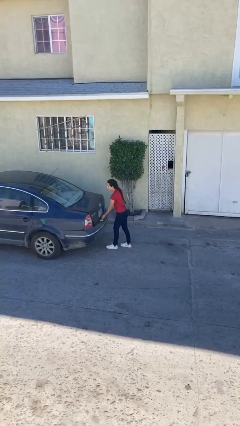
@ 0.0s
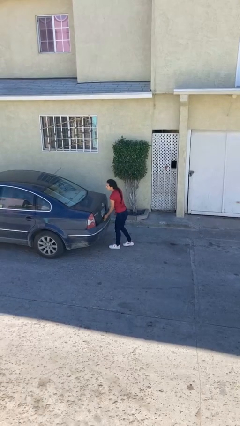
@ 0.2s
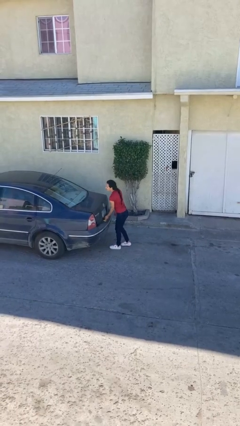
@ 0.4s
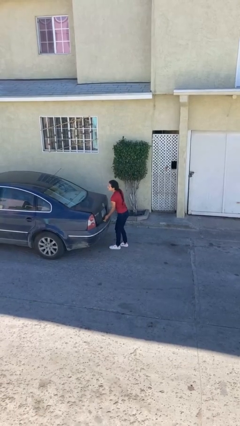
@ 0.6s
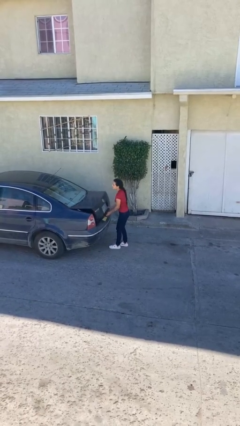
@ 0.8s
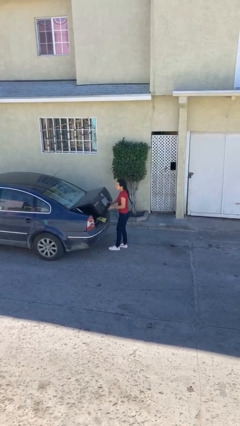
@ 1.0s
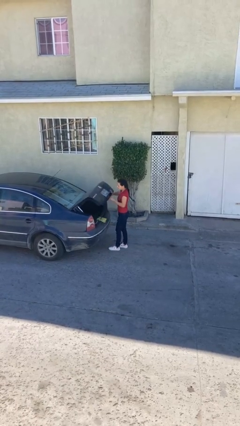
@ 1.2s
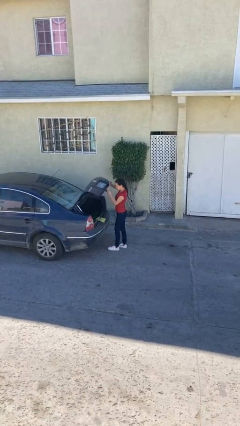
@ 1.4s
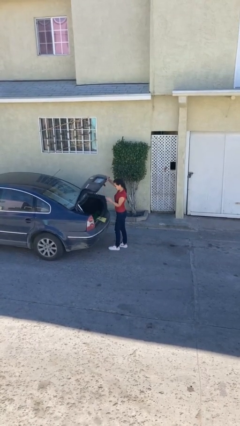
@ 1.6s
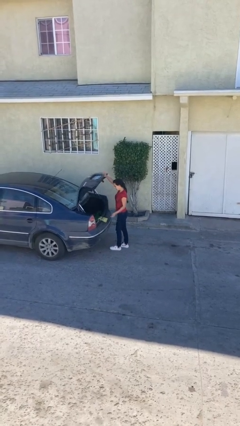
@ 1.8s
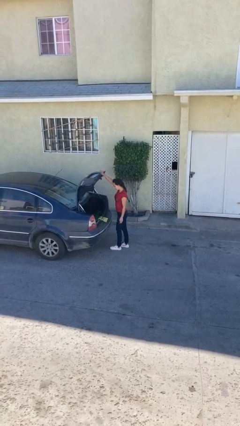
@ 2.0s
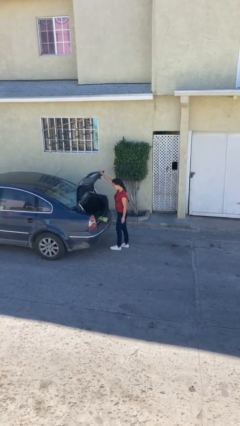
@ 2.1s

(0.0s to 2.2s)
person opens car trunk

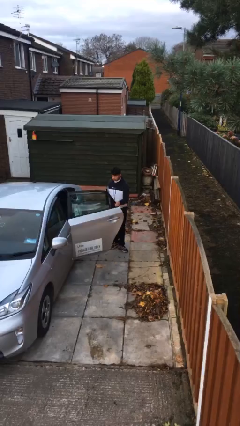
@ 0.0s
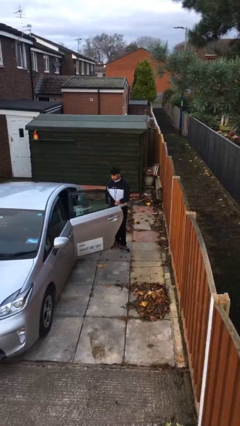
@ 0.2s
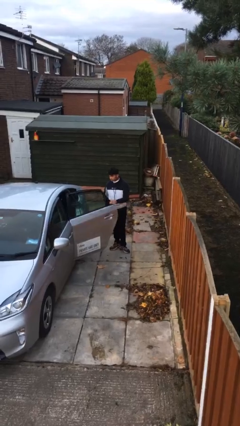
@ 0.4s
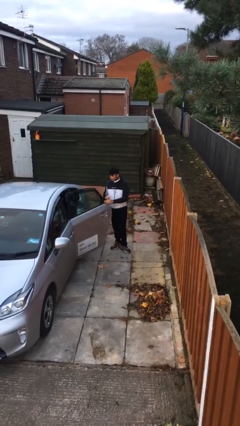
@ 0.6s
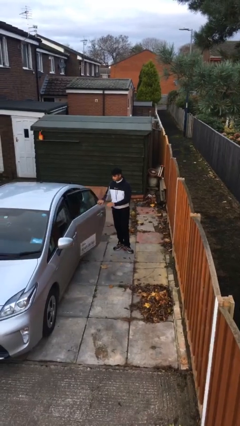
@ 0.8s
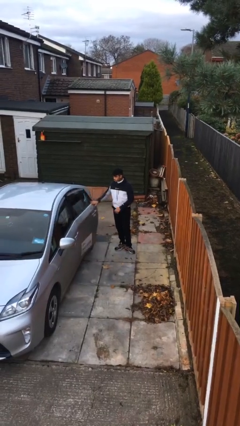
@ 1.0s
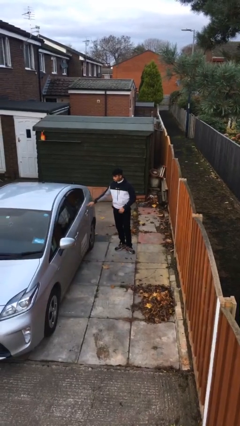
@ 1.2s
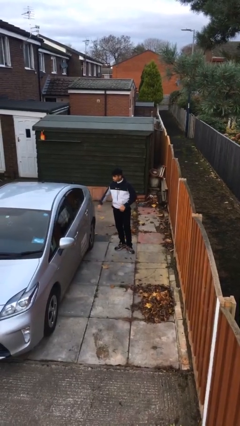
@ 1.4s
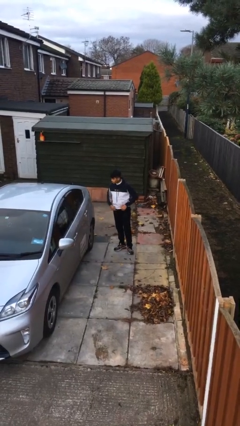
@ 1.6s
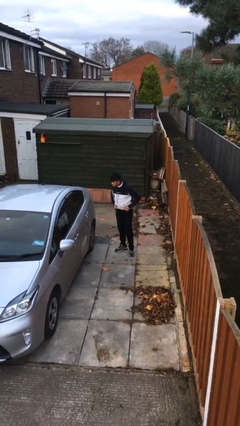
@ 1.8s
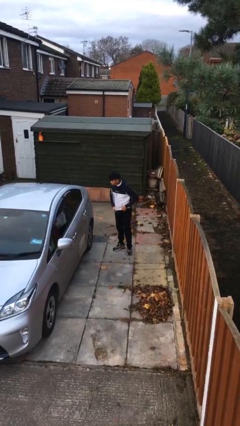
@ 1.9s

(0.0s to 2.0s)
person closes car door

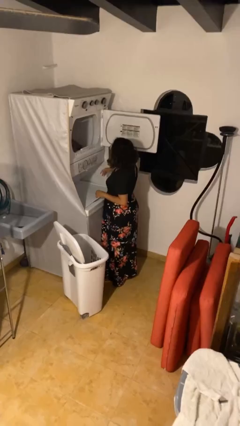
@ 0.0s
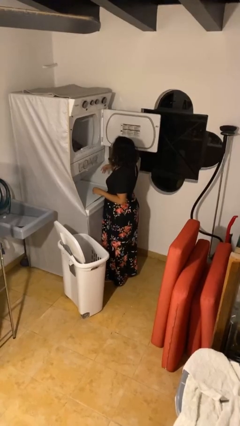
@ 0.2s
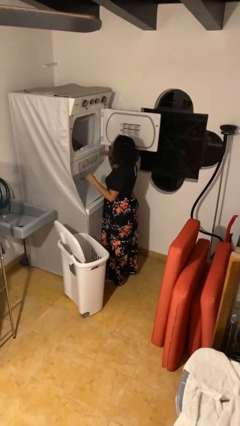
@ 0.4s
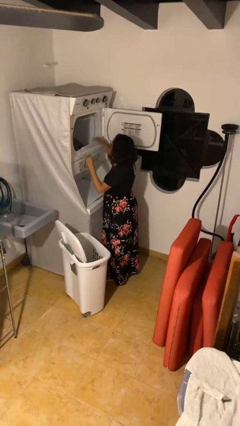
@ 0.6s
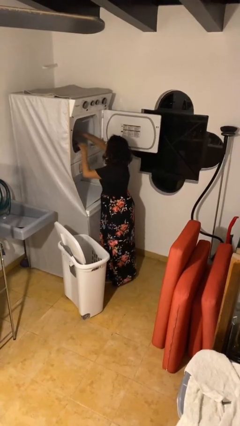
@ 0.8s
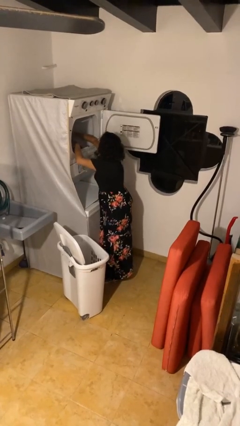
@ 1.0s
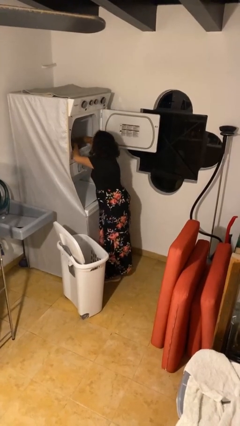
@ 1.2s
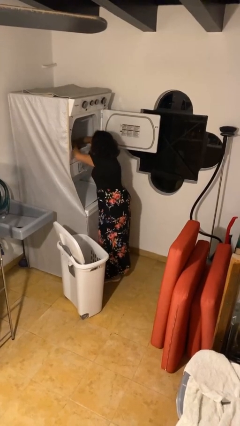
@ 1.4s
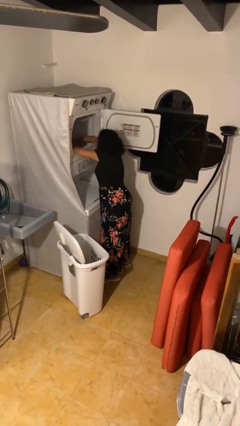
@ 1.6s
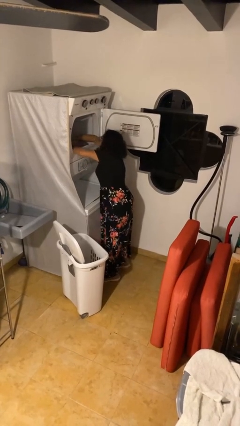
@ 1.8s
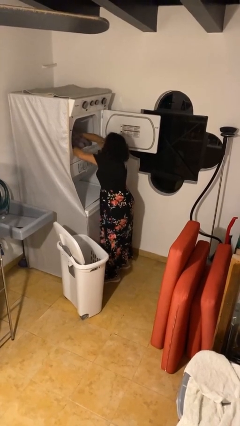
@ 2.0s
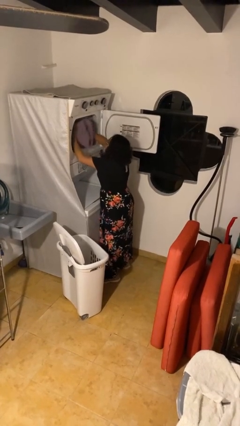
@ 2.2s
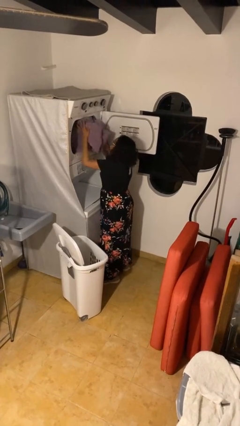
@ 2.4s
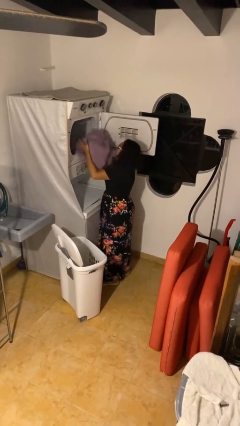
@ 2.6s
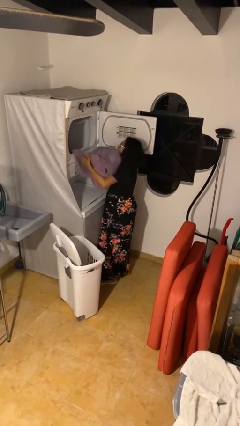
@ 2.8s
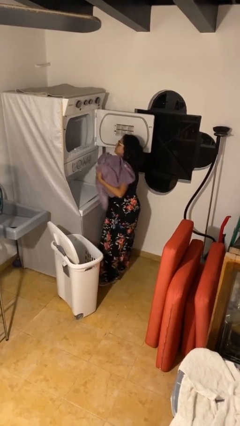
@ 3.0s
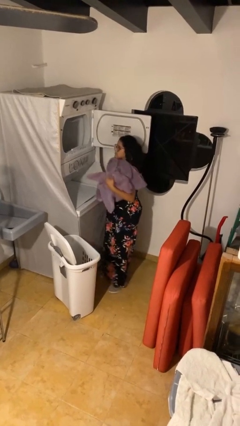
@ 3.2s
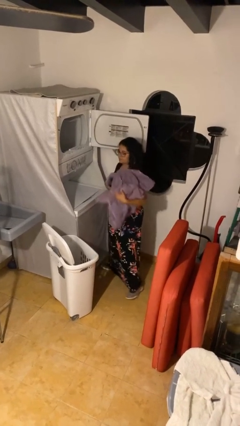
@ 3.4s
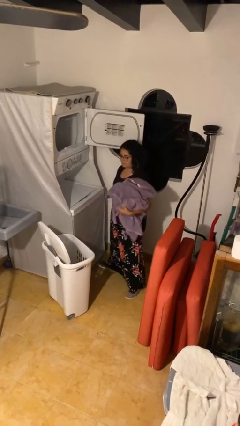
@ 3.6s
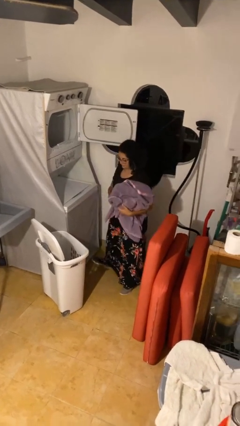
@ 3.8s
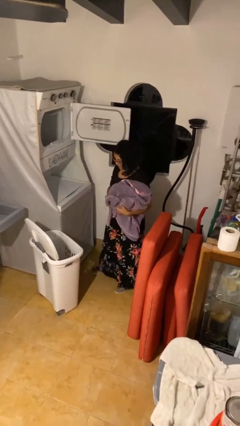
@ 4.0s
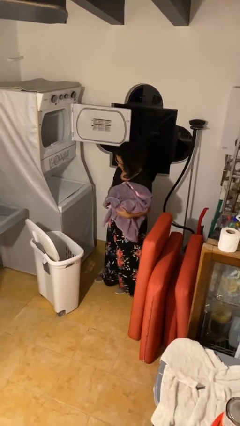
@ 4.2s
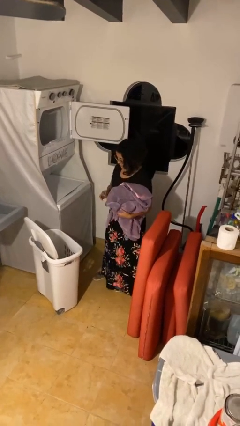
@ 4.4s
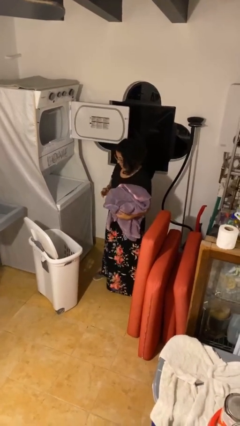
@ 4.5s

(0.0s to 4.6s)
person unloads dryer

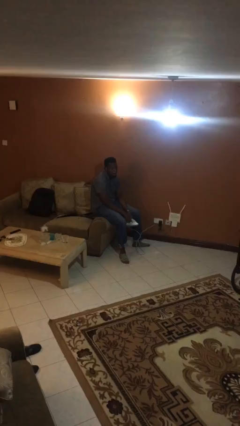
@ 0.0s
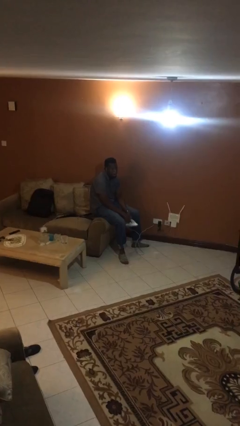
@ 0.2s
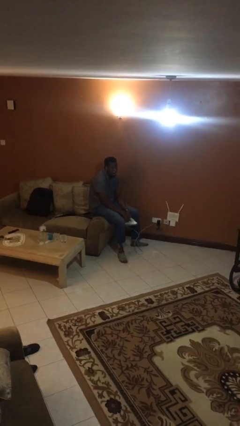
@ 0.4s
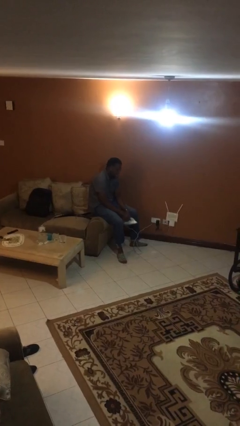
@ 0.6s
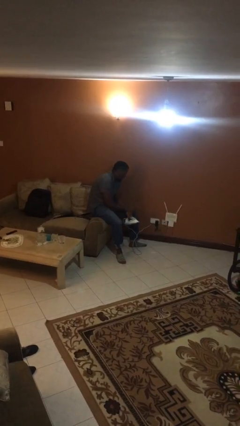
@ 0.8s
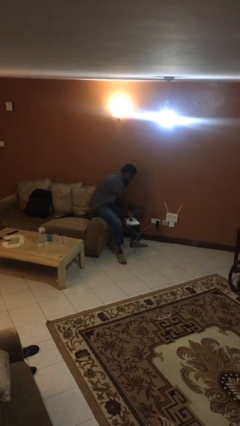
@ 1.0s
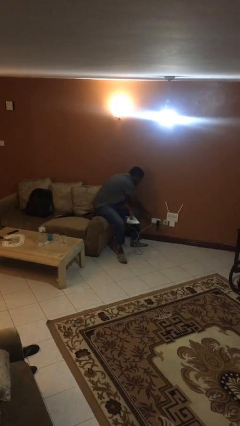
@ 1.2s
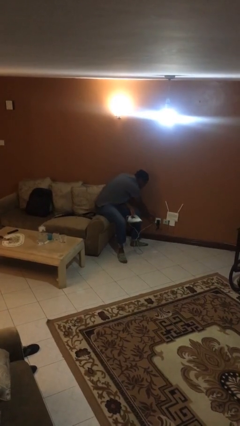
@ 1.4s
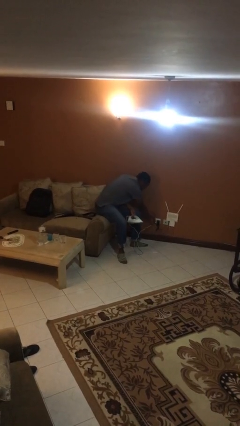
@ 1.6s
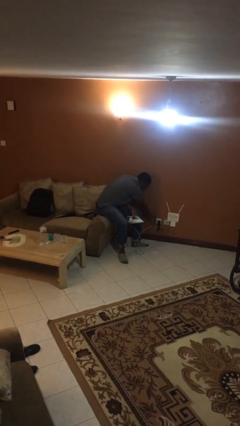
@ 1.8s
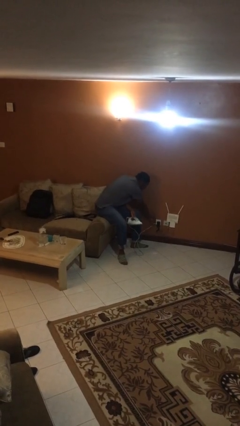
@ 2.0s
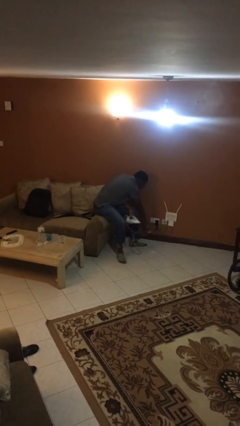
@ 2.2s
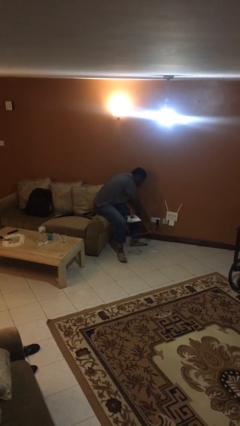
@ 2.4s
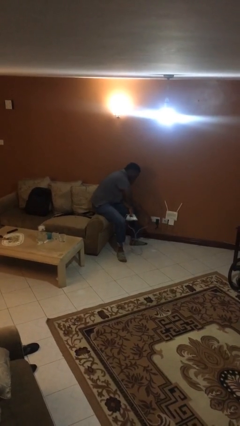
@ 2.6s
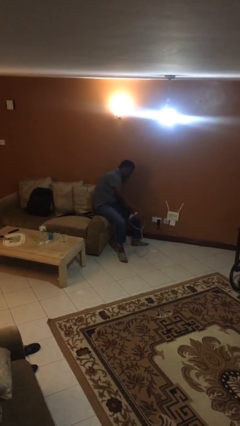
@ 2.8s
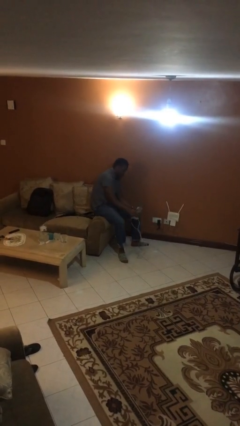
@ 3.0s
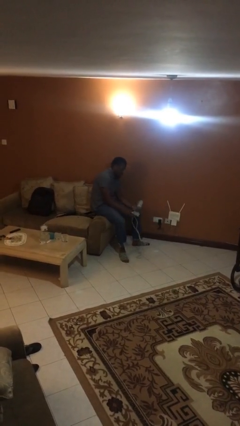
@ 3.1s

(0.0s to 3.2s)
person unplugs from electrical socket

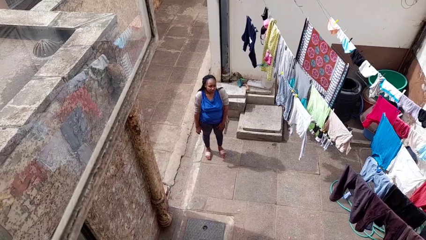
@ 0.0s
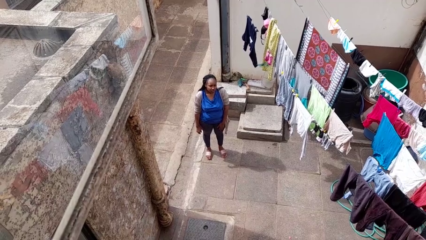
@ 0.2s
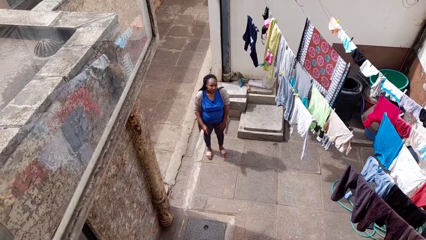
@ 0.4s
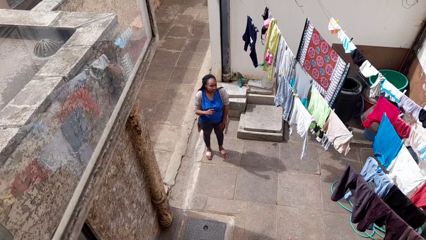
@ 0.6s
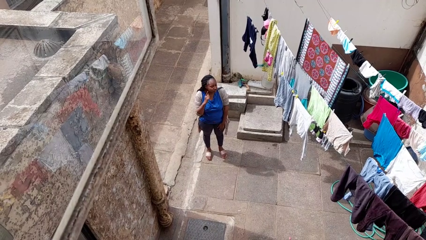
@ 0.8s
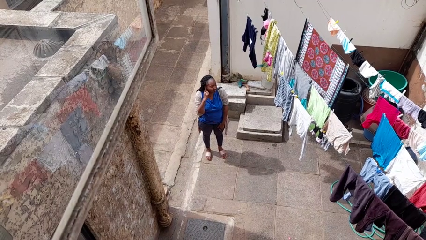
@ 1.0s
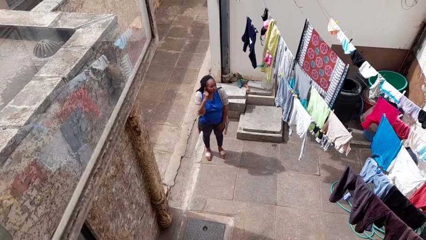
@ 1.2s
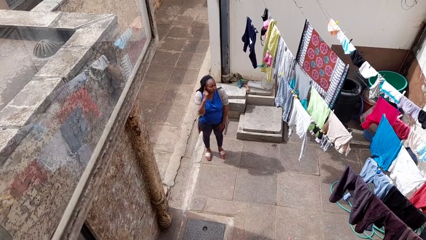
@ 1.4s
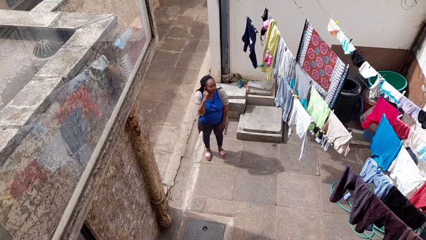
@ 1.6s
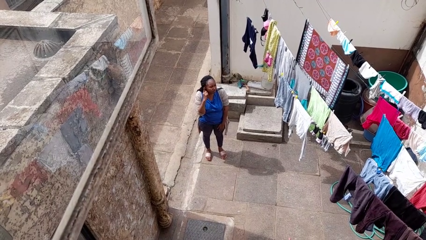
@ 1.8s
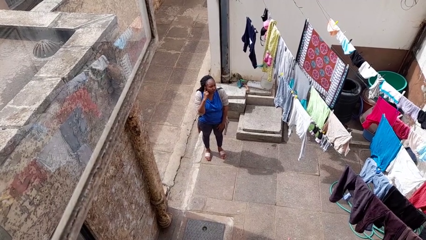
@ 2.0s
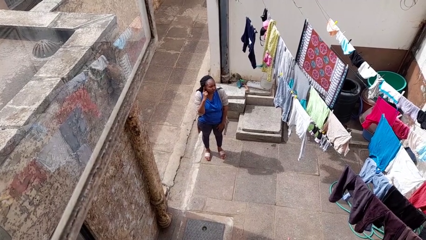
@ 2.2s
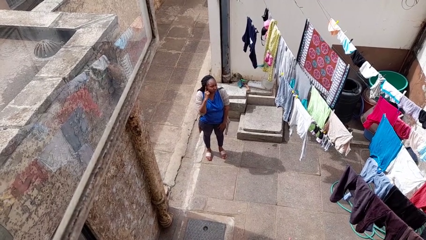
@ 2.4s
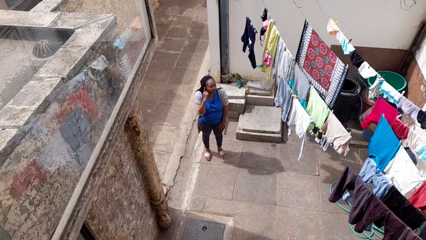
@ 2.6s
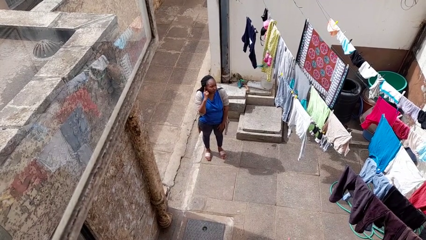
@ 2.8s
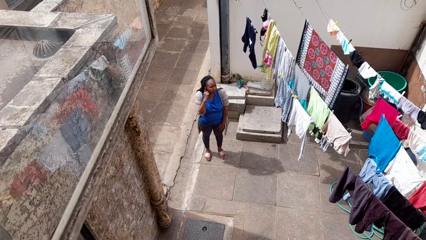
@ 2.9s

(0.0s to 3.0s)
person gestures listen closely

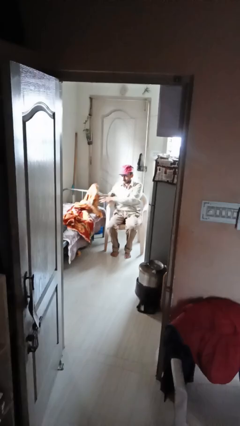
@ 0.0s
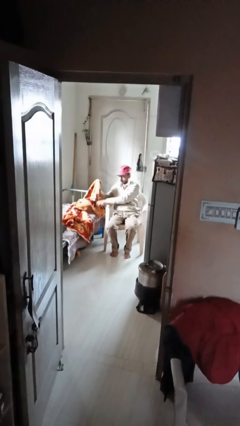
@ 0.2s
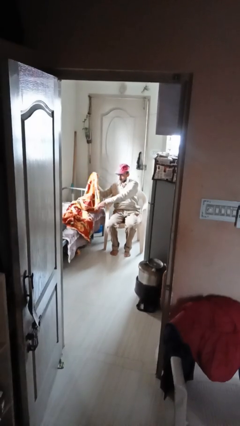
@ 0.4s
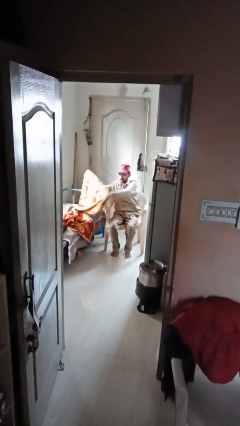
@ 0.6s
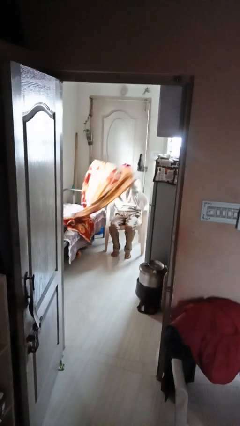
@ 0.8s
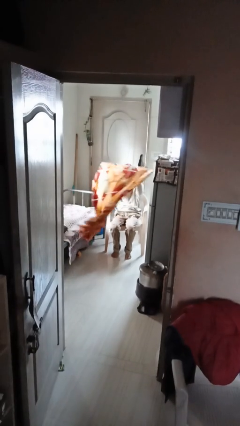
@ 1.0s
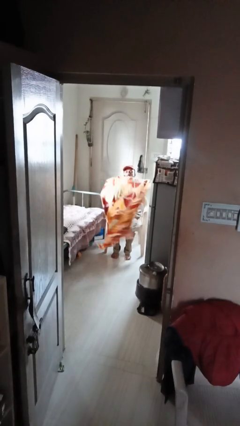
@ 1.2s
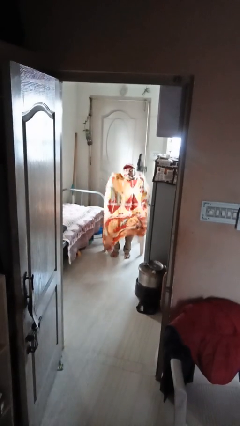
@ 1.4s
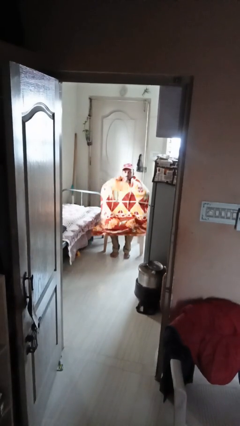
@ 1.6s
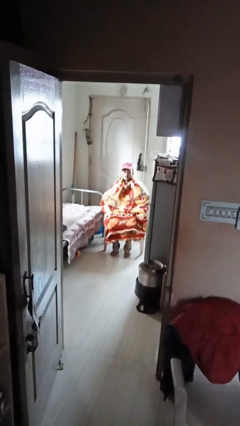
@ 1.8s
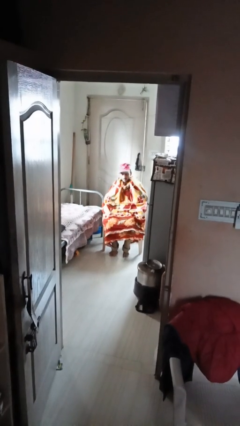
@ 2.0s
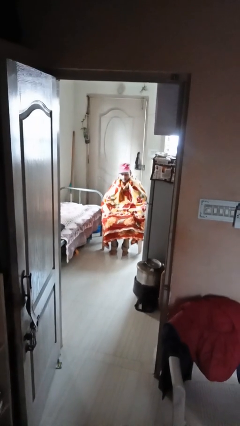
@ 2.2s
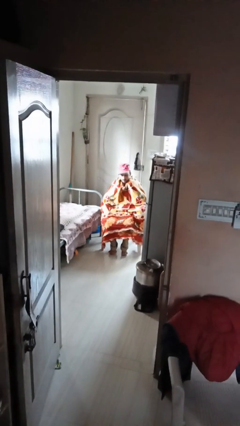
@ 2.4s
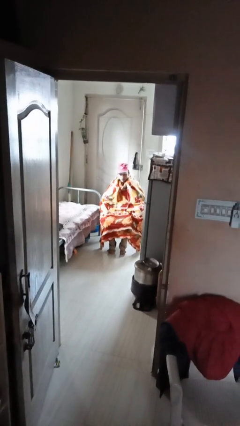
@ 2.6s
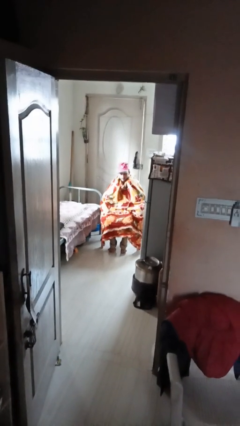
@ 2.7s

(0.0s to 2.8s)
person covers with blanket

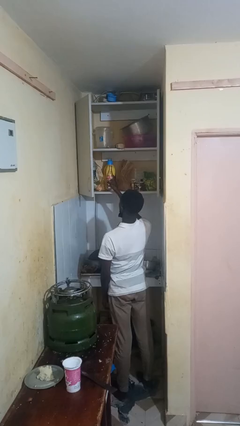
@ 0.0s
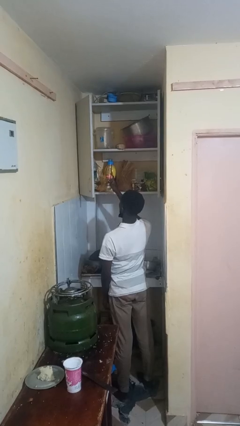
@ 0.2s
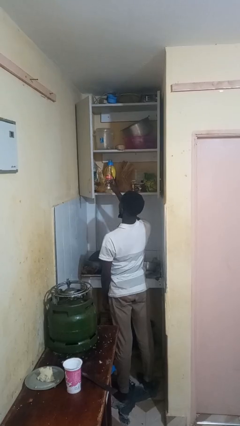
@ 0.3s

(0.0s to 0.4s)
person picks up object from cabinet
